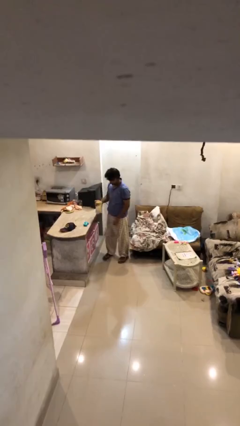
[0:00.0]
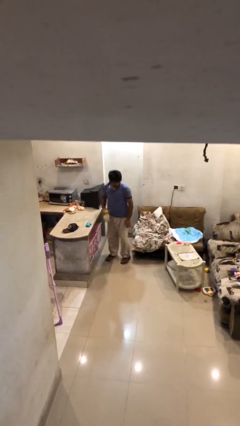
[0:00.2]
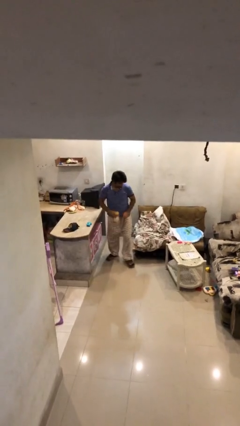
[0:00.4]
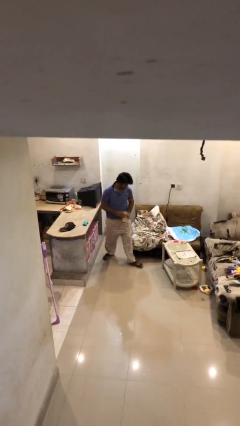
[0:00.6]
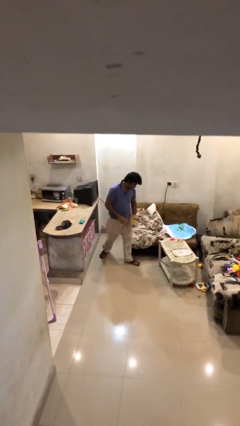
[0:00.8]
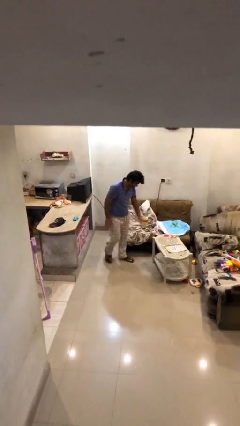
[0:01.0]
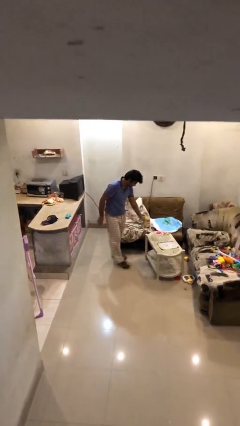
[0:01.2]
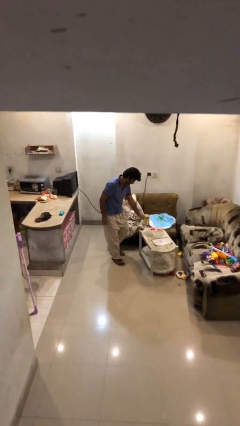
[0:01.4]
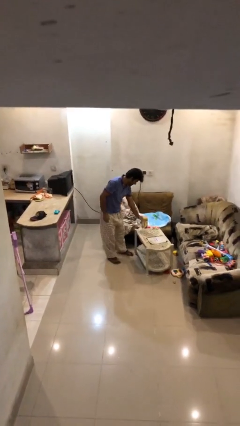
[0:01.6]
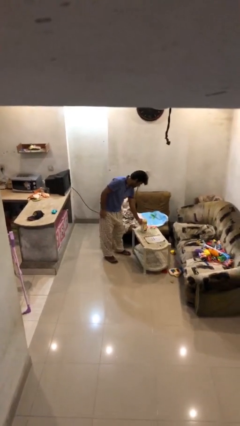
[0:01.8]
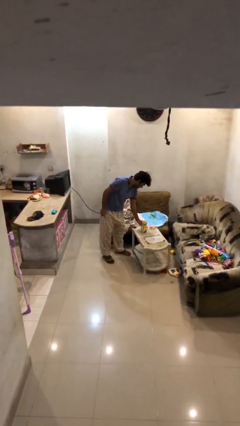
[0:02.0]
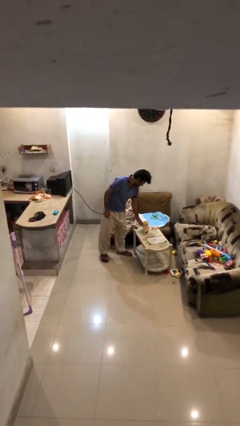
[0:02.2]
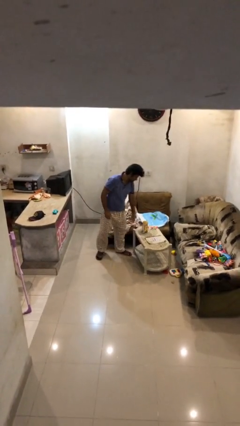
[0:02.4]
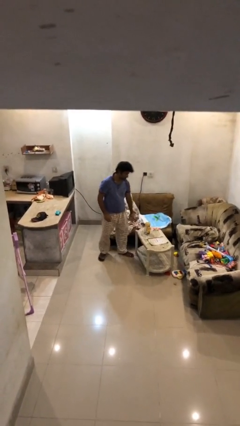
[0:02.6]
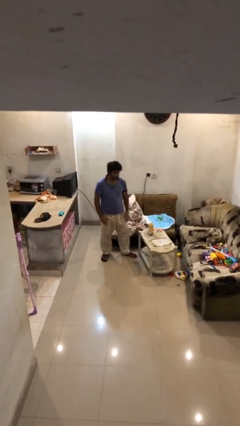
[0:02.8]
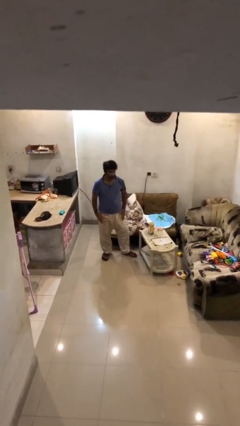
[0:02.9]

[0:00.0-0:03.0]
person puts down object on table

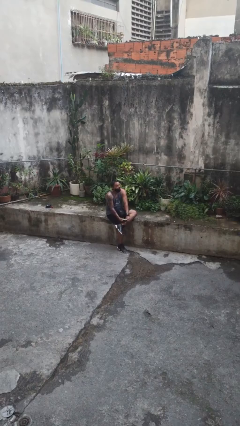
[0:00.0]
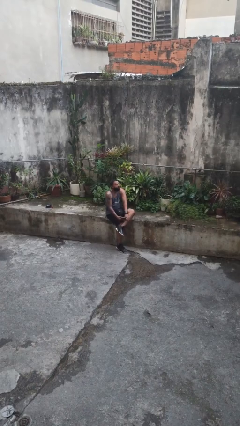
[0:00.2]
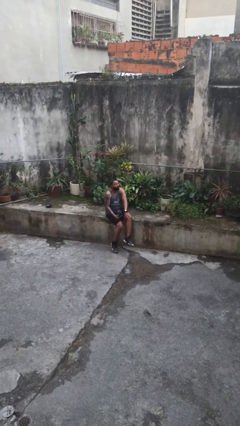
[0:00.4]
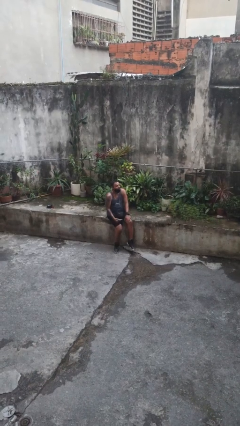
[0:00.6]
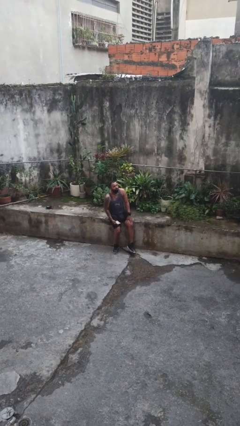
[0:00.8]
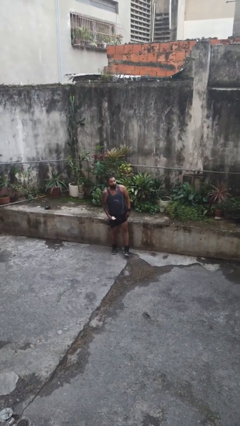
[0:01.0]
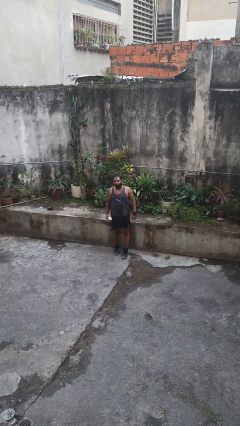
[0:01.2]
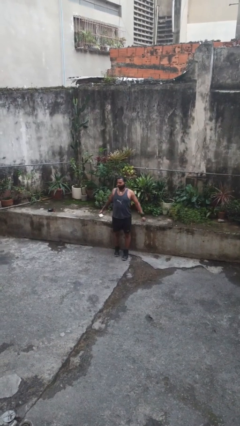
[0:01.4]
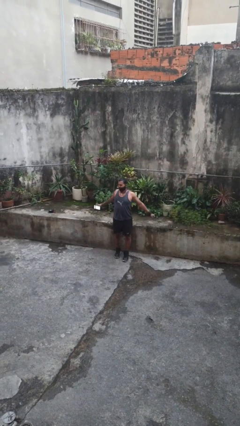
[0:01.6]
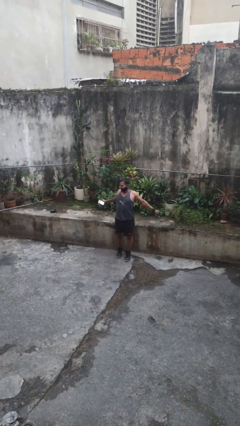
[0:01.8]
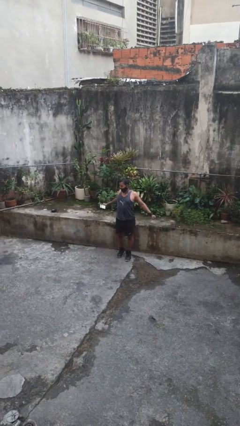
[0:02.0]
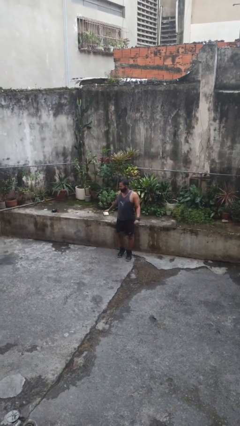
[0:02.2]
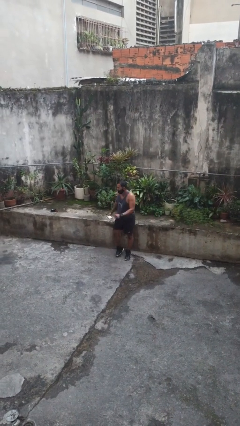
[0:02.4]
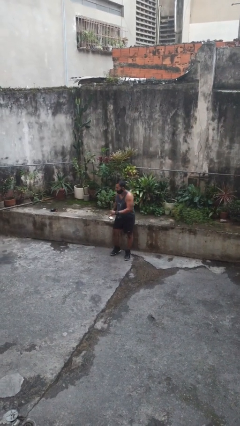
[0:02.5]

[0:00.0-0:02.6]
person stands up

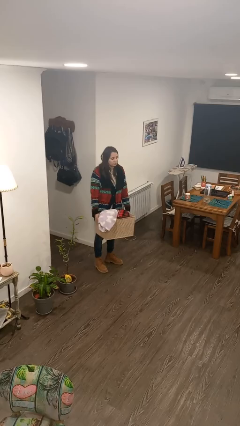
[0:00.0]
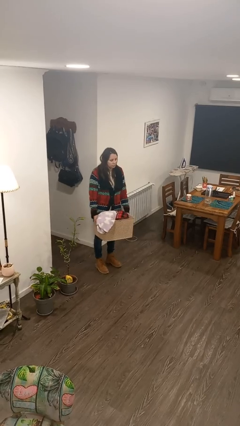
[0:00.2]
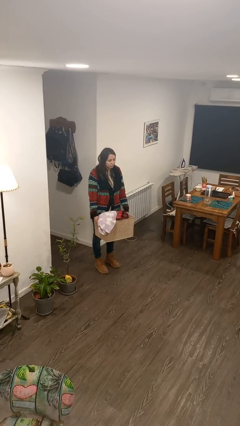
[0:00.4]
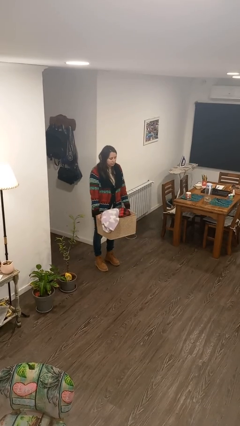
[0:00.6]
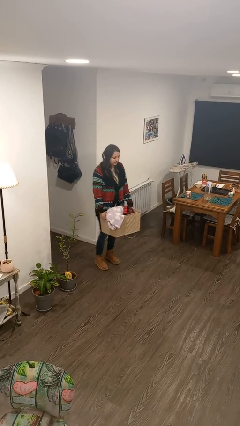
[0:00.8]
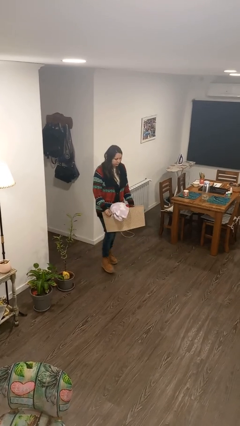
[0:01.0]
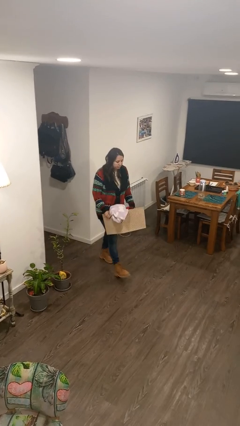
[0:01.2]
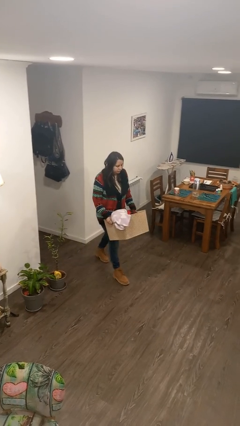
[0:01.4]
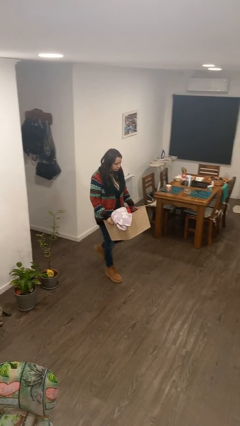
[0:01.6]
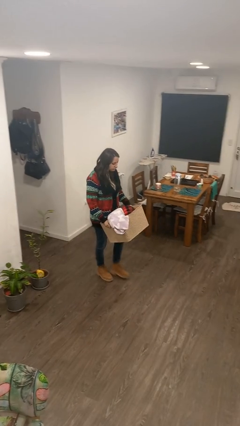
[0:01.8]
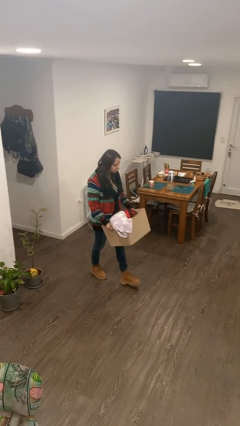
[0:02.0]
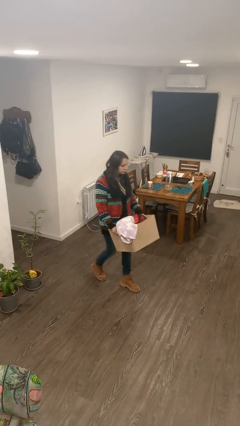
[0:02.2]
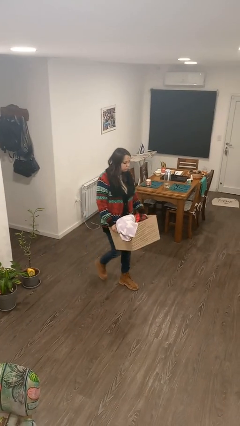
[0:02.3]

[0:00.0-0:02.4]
person carries laundry basket

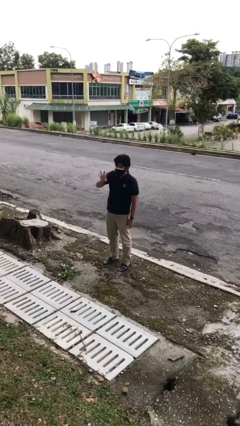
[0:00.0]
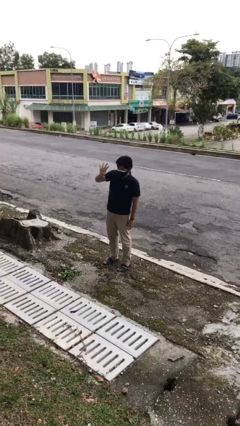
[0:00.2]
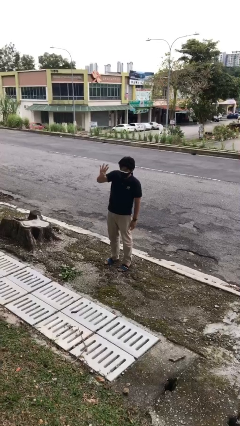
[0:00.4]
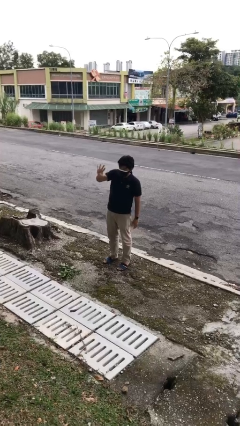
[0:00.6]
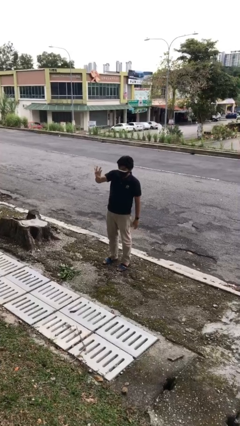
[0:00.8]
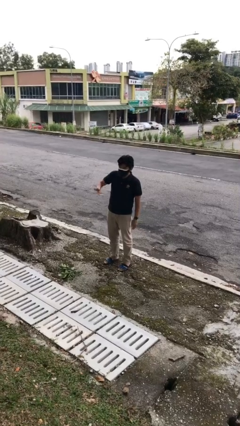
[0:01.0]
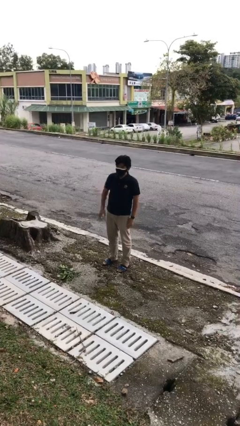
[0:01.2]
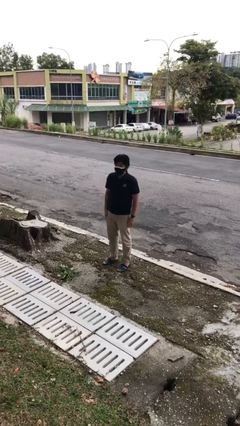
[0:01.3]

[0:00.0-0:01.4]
person gestures number four

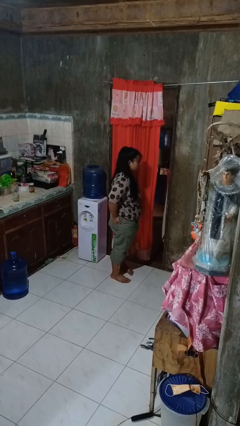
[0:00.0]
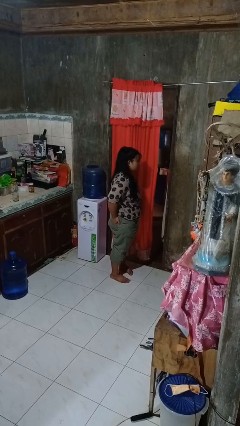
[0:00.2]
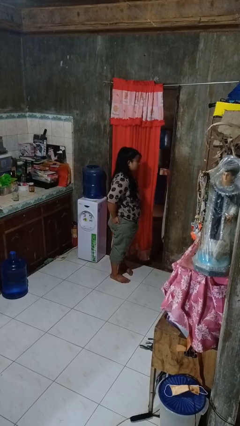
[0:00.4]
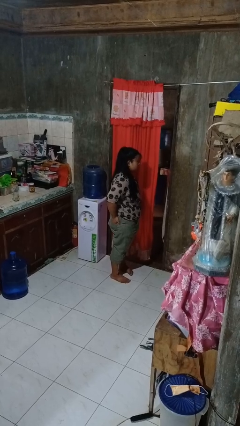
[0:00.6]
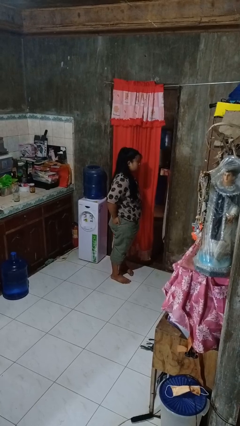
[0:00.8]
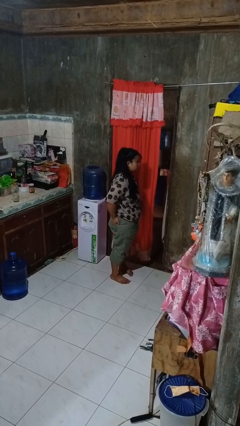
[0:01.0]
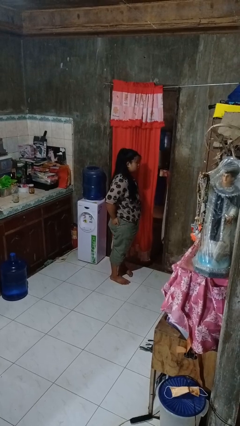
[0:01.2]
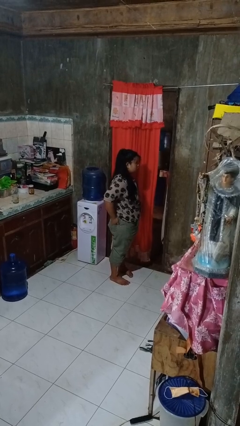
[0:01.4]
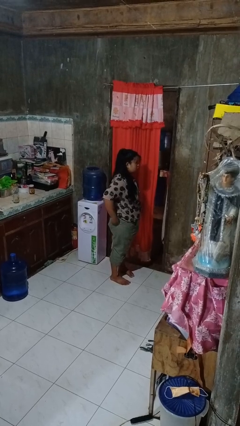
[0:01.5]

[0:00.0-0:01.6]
person puts hands in back pockets

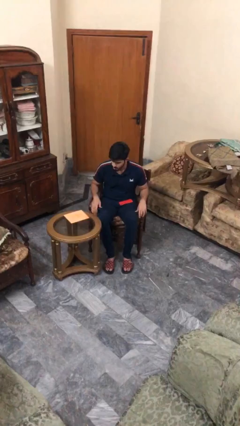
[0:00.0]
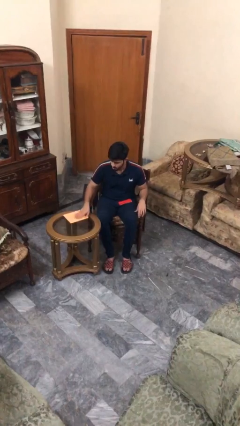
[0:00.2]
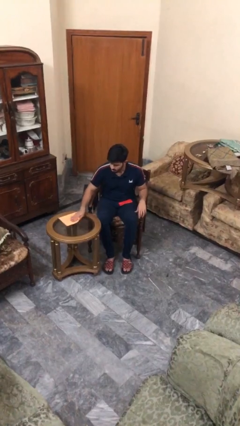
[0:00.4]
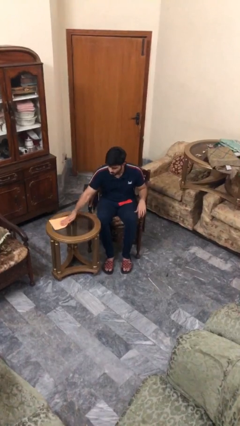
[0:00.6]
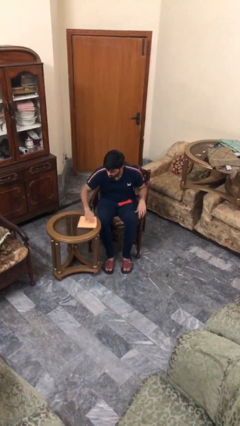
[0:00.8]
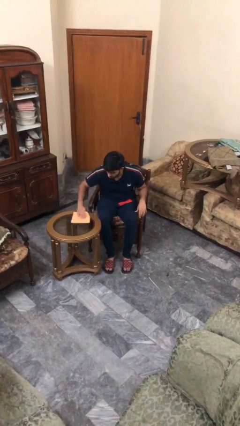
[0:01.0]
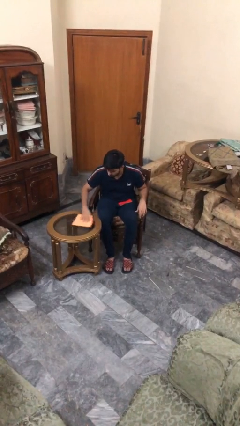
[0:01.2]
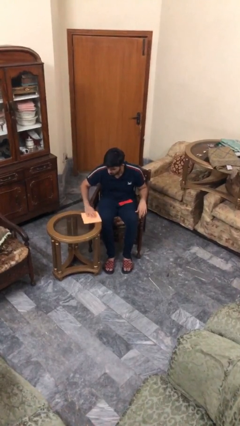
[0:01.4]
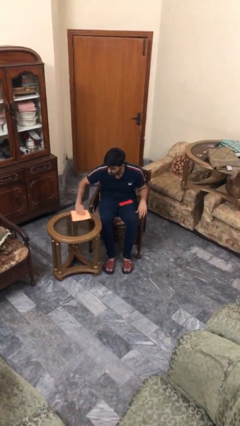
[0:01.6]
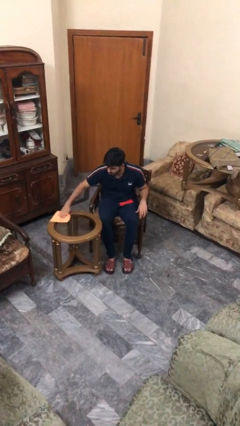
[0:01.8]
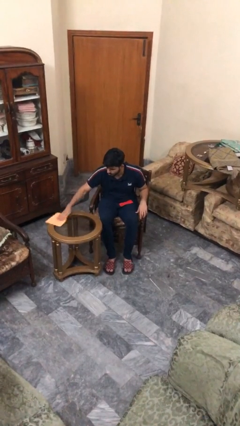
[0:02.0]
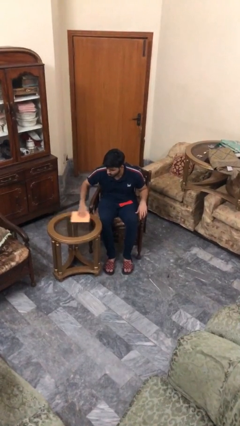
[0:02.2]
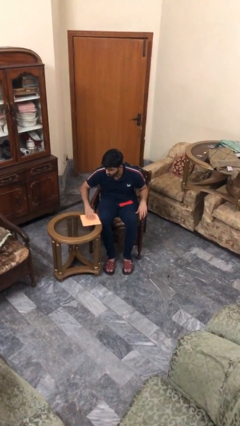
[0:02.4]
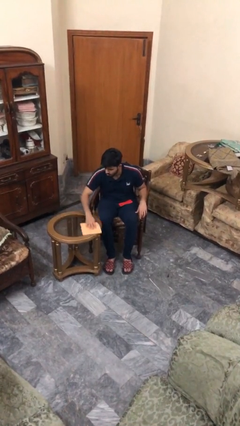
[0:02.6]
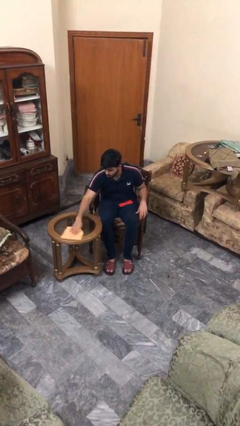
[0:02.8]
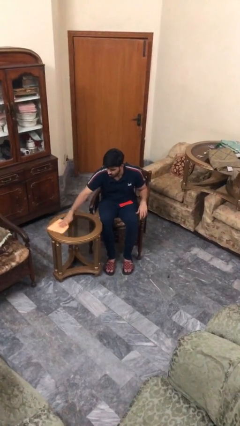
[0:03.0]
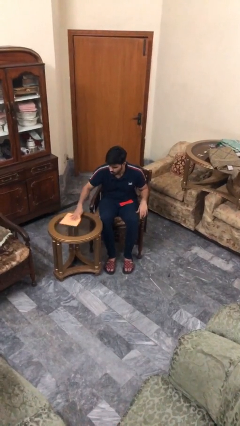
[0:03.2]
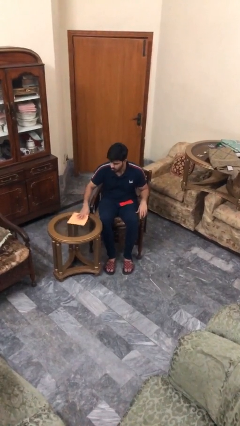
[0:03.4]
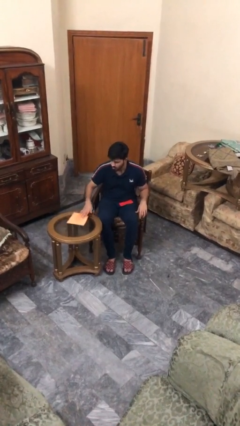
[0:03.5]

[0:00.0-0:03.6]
person cleans table with rag

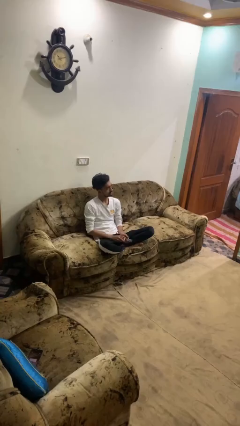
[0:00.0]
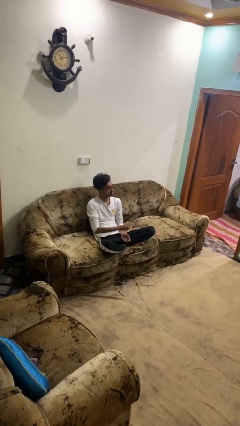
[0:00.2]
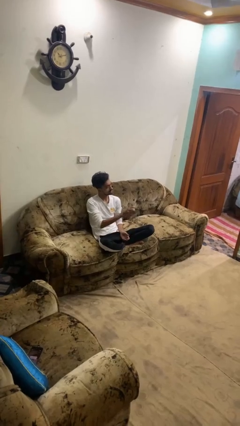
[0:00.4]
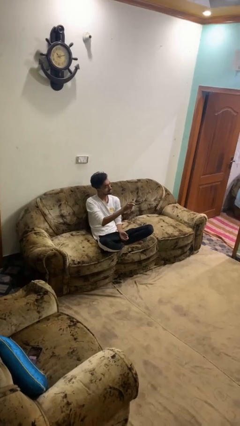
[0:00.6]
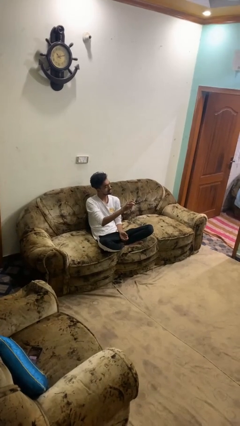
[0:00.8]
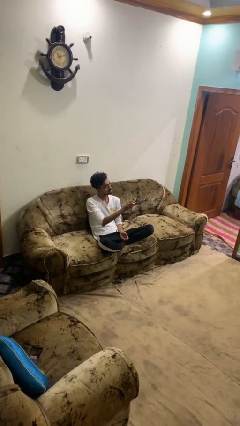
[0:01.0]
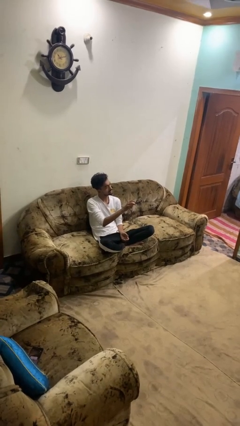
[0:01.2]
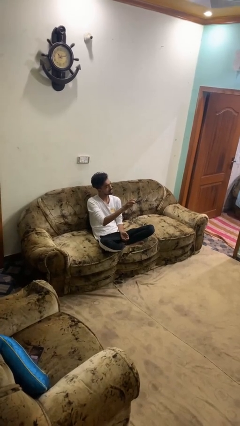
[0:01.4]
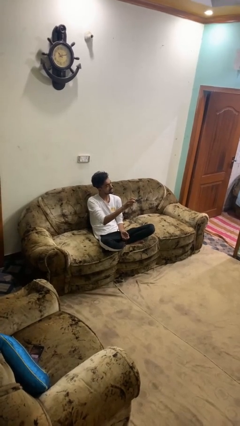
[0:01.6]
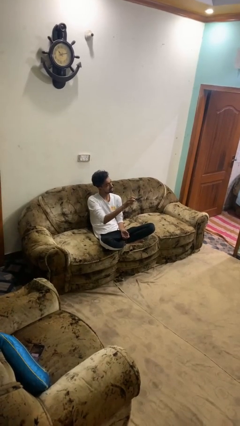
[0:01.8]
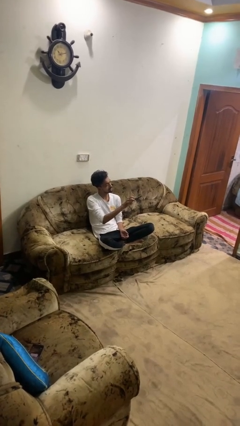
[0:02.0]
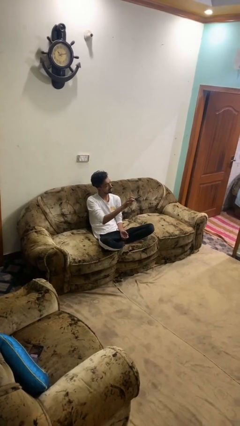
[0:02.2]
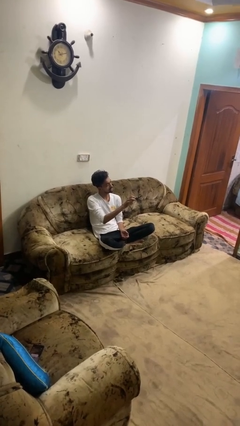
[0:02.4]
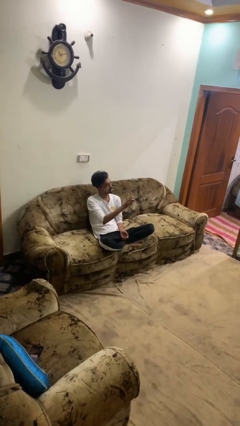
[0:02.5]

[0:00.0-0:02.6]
person uses television remote
